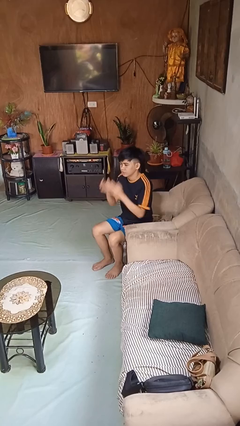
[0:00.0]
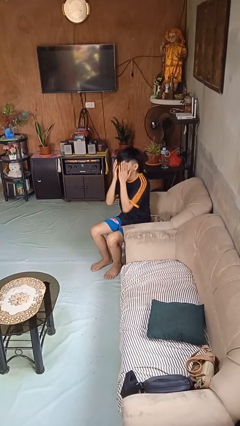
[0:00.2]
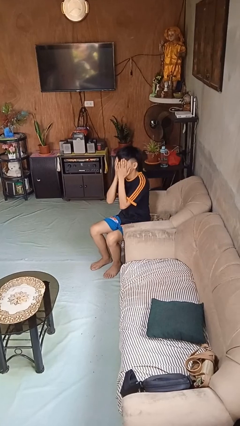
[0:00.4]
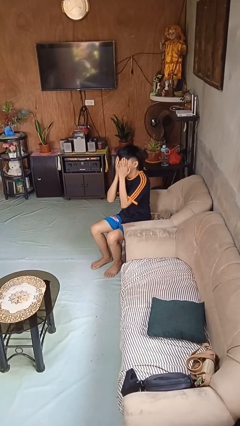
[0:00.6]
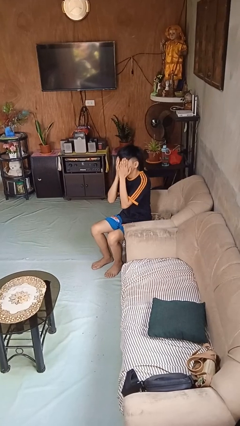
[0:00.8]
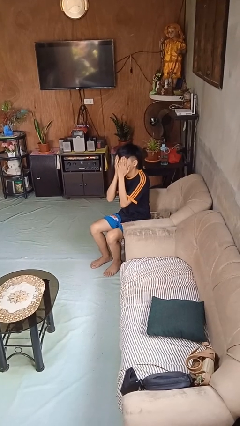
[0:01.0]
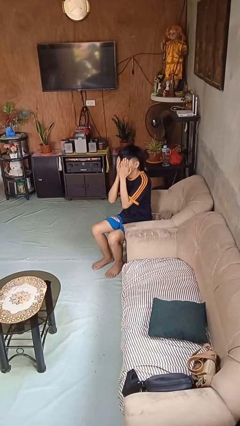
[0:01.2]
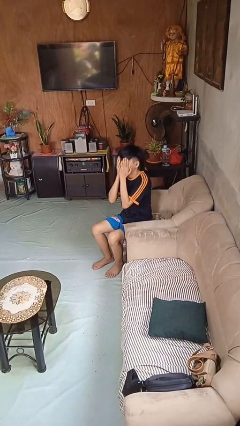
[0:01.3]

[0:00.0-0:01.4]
person covers face with hands

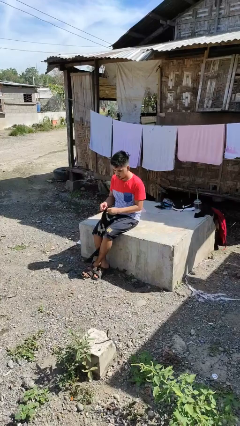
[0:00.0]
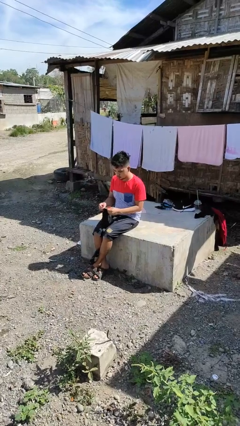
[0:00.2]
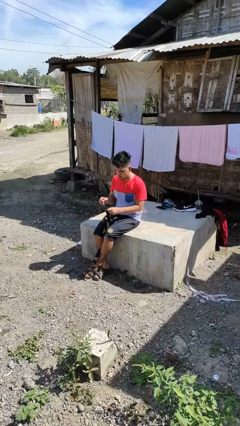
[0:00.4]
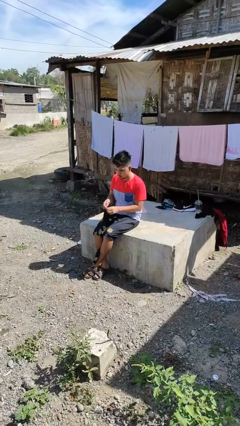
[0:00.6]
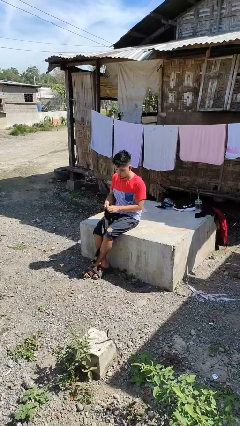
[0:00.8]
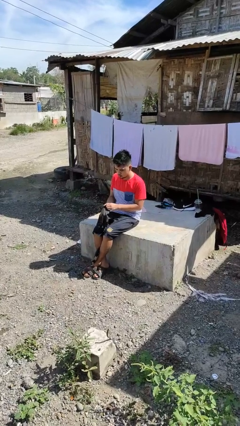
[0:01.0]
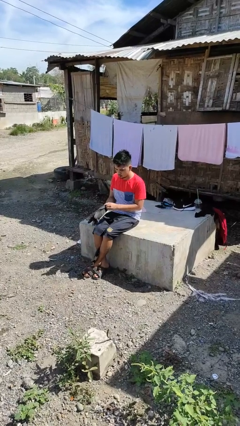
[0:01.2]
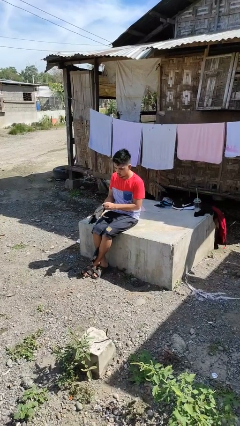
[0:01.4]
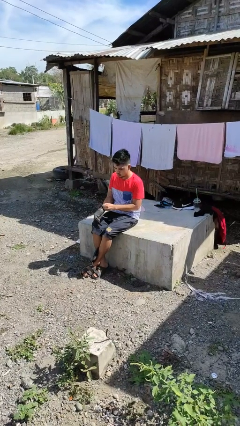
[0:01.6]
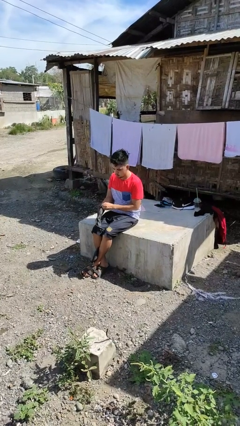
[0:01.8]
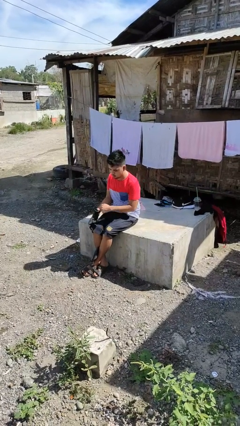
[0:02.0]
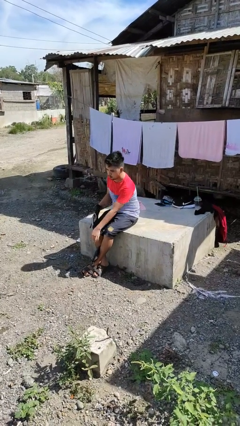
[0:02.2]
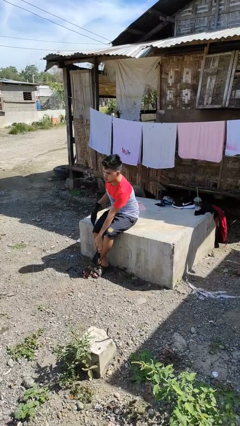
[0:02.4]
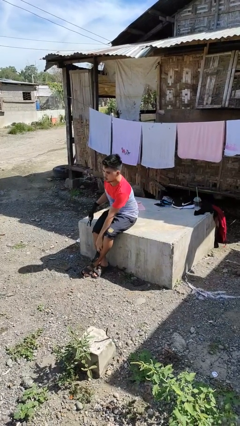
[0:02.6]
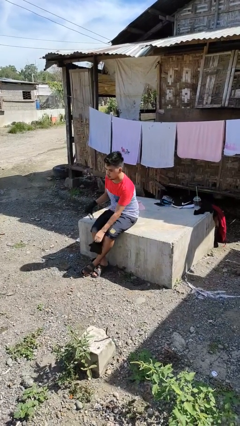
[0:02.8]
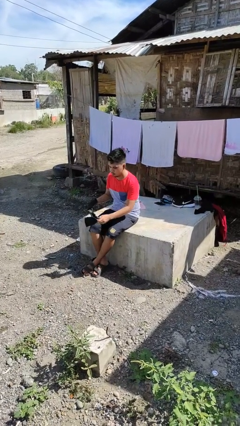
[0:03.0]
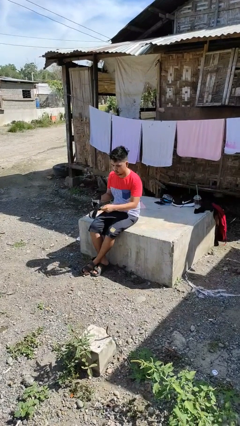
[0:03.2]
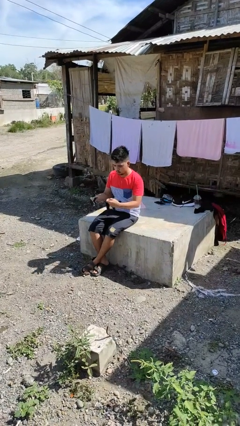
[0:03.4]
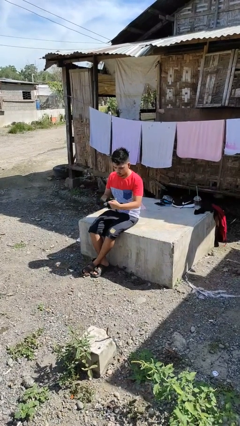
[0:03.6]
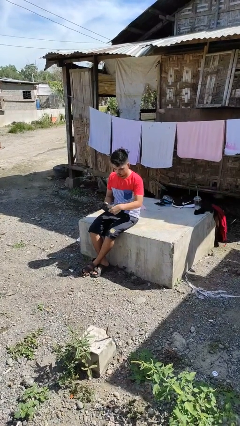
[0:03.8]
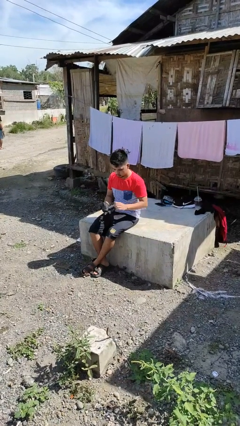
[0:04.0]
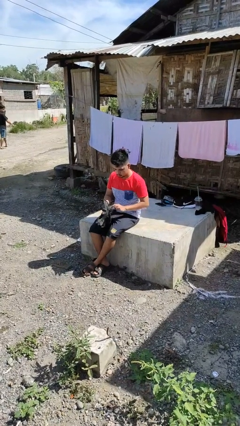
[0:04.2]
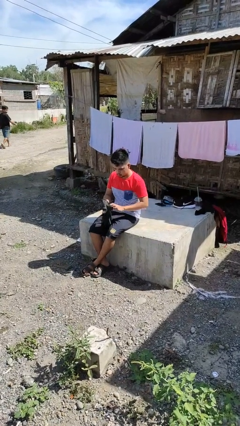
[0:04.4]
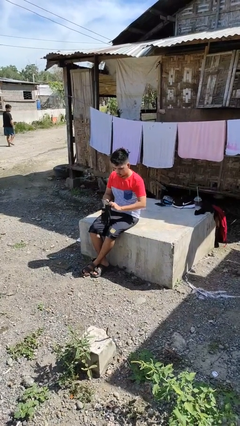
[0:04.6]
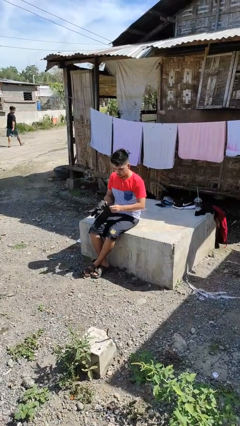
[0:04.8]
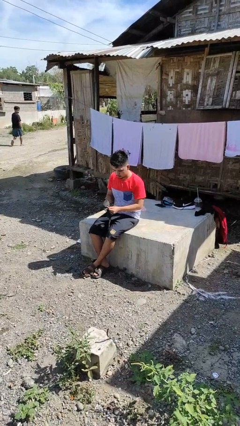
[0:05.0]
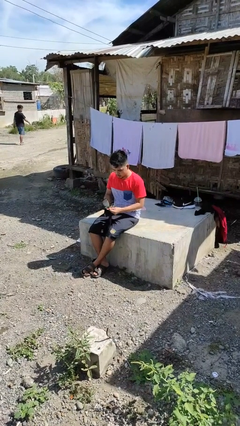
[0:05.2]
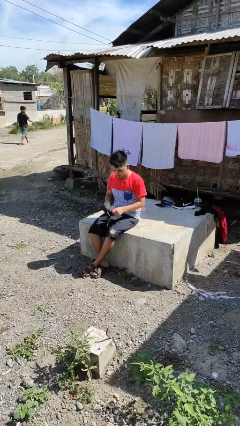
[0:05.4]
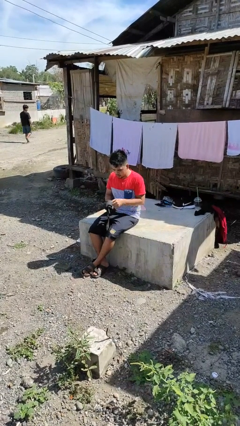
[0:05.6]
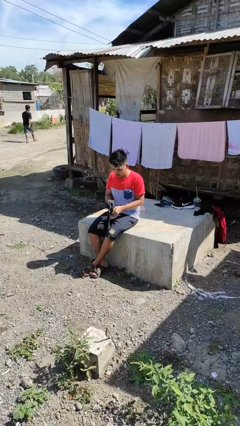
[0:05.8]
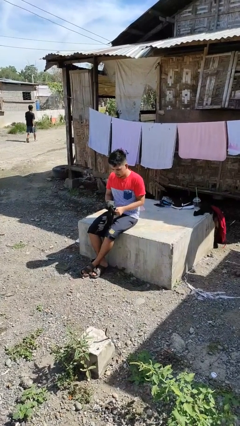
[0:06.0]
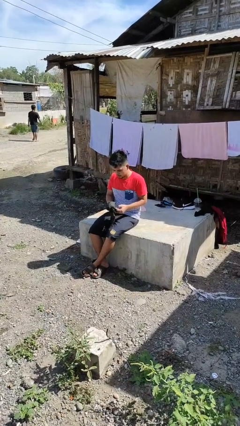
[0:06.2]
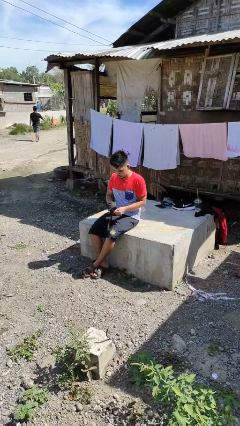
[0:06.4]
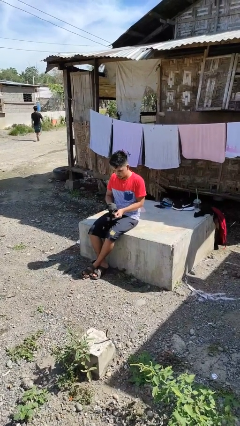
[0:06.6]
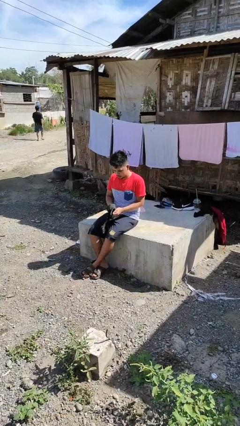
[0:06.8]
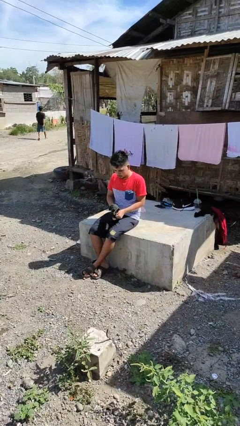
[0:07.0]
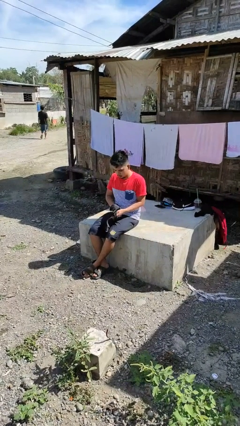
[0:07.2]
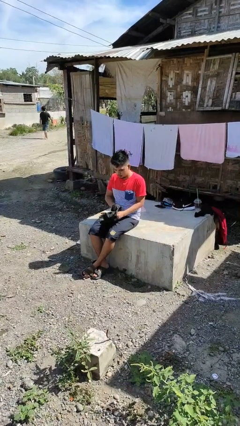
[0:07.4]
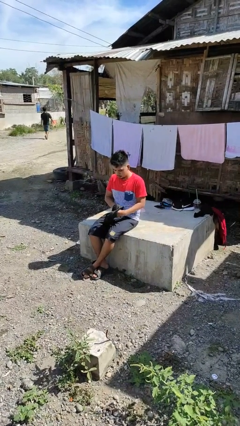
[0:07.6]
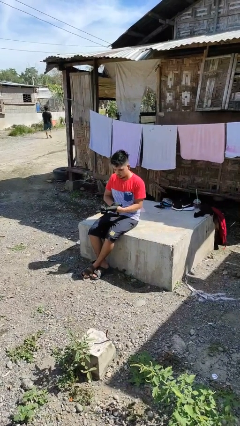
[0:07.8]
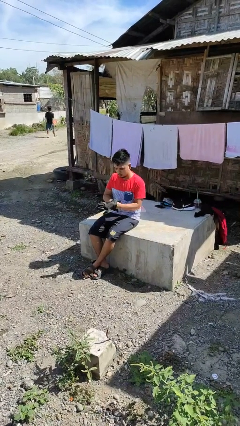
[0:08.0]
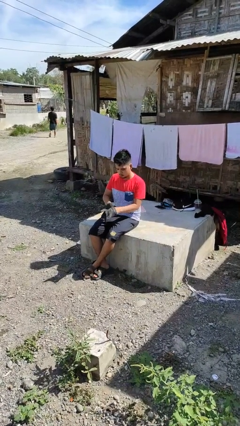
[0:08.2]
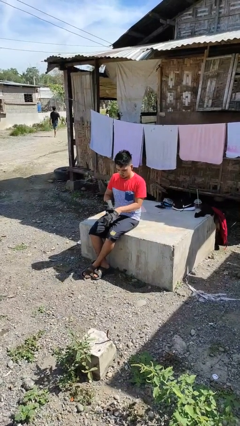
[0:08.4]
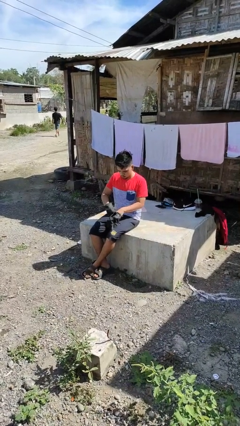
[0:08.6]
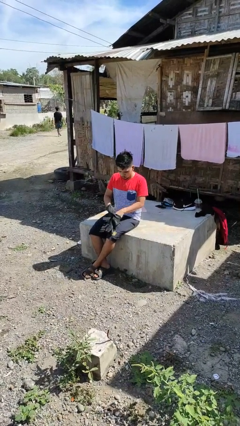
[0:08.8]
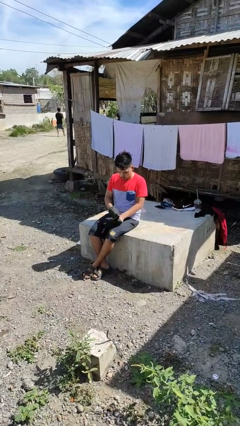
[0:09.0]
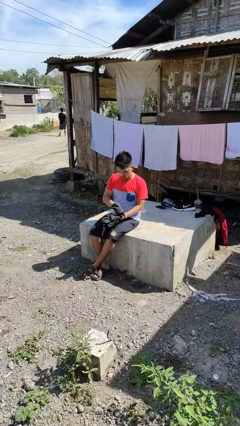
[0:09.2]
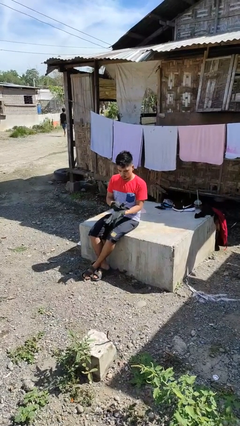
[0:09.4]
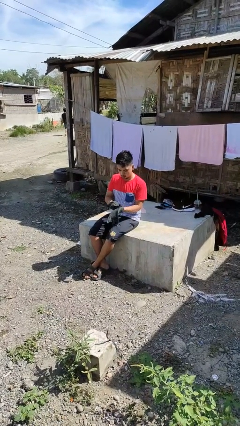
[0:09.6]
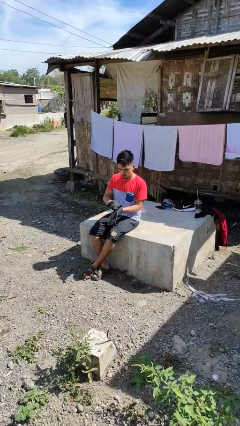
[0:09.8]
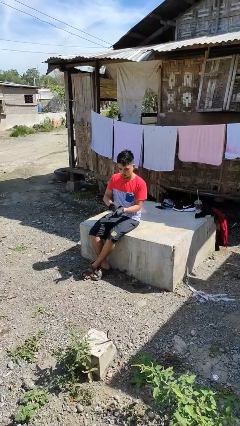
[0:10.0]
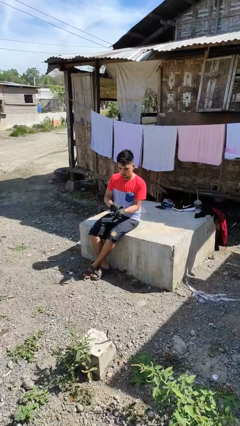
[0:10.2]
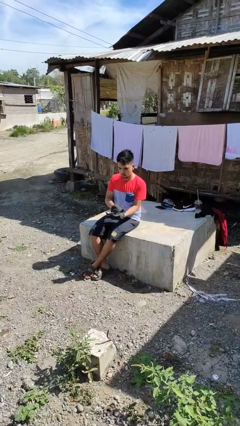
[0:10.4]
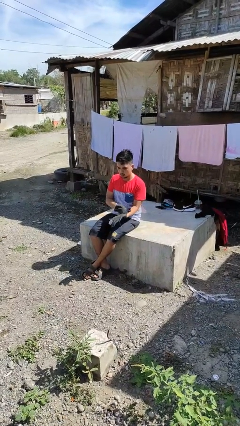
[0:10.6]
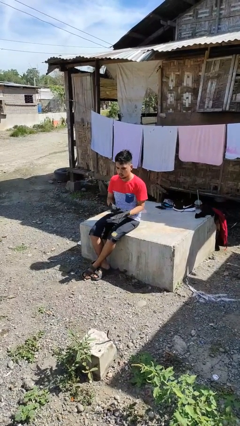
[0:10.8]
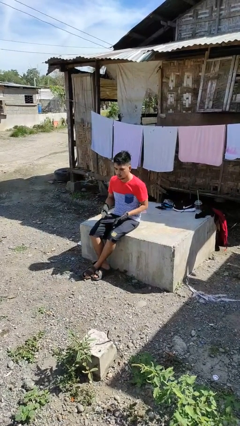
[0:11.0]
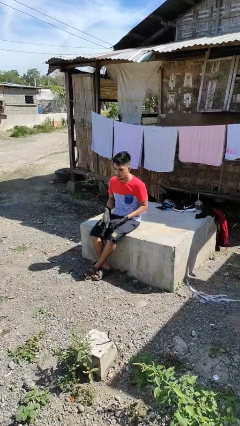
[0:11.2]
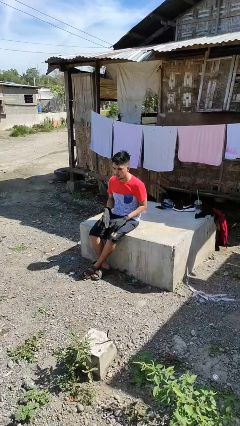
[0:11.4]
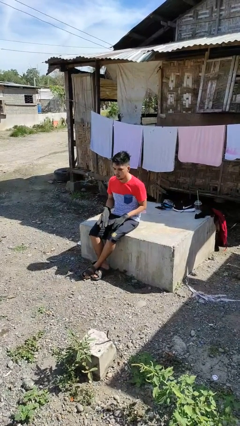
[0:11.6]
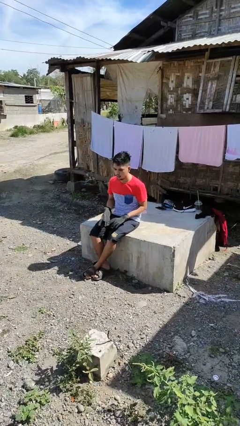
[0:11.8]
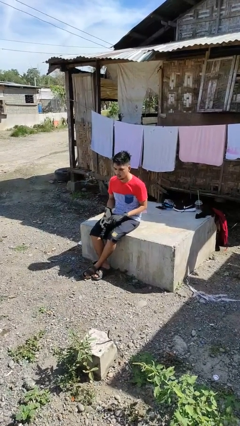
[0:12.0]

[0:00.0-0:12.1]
person puts on gloves

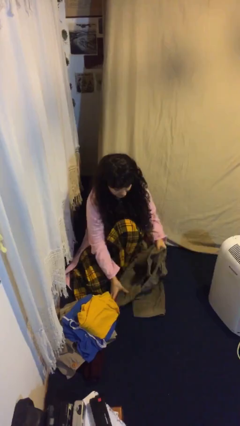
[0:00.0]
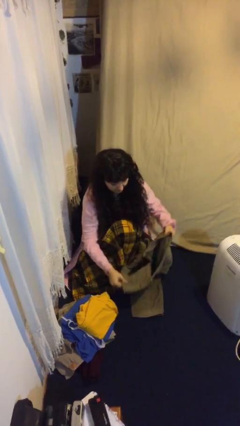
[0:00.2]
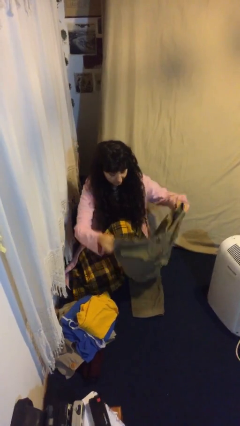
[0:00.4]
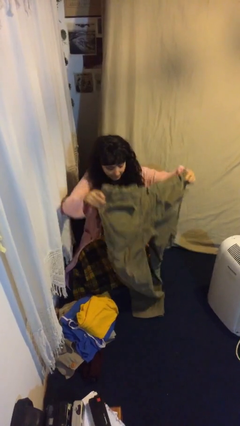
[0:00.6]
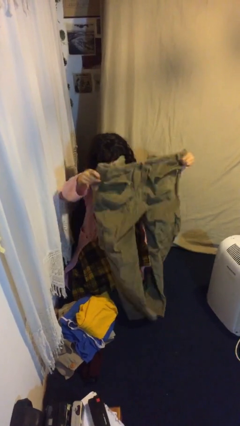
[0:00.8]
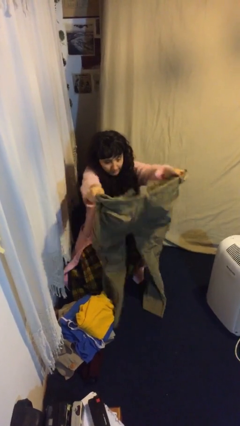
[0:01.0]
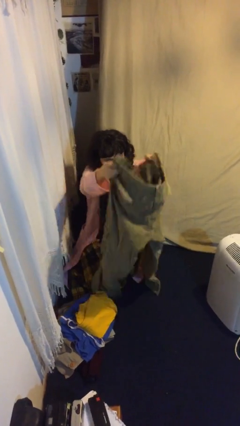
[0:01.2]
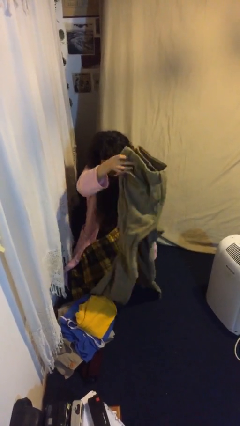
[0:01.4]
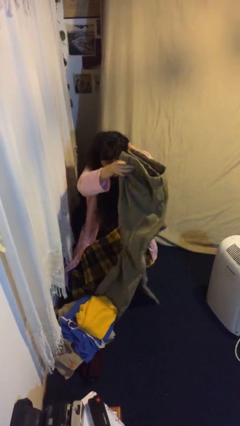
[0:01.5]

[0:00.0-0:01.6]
person folds pants

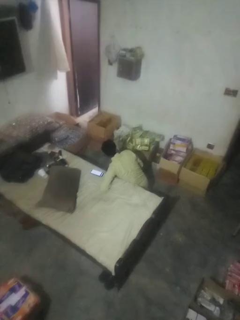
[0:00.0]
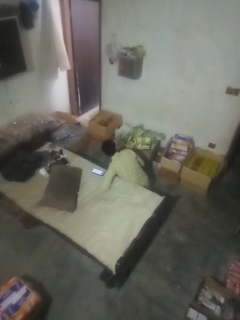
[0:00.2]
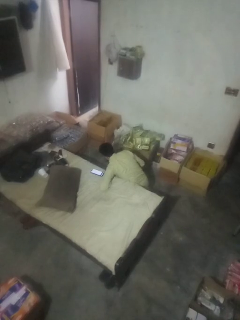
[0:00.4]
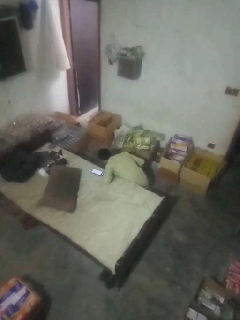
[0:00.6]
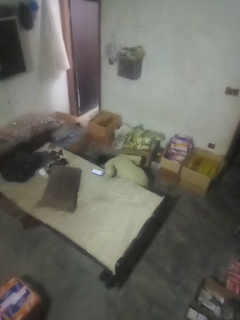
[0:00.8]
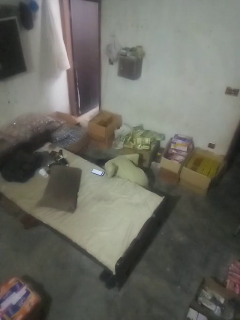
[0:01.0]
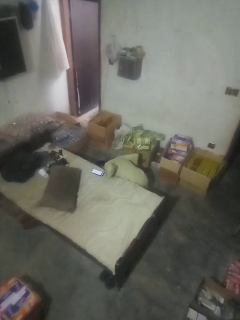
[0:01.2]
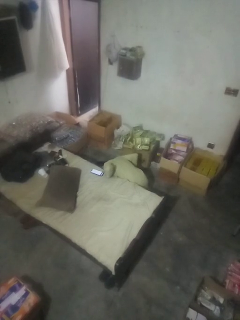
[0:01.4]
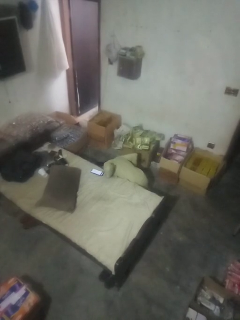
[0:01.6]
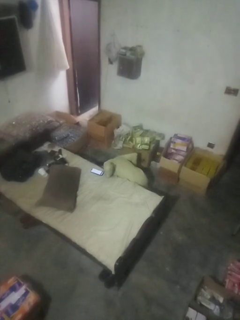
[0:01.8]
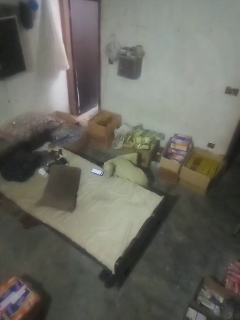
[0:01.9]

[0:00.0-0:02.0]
person searches under bed

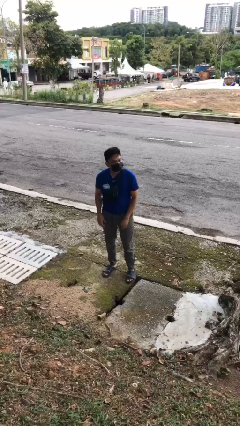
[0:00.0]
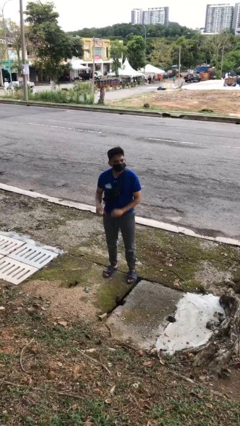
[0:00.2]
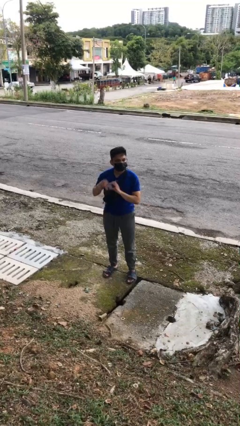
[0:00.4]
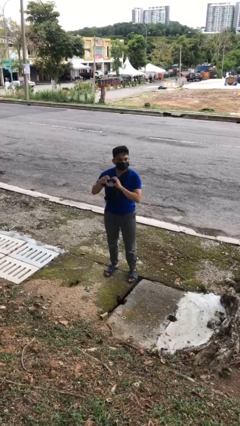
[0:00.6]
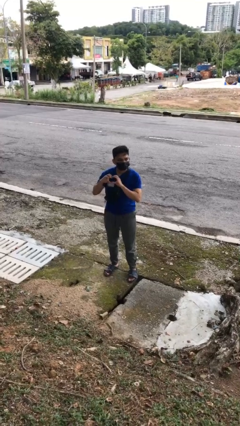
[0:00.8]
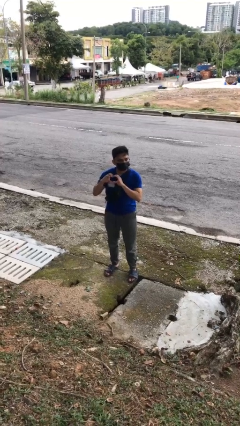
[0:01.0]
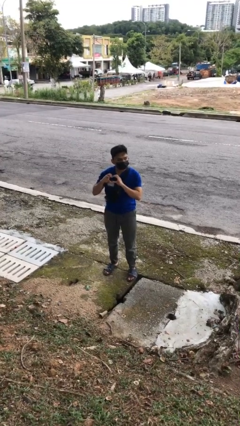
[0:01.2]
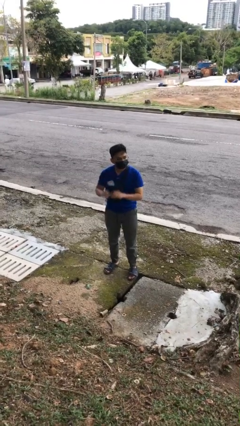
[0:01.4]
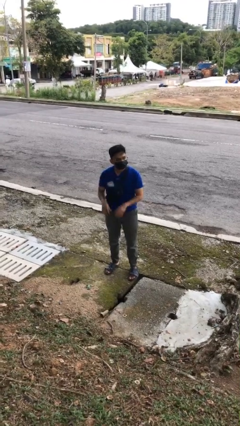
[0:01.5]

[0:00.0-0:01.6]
person gestures heart
